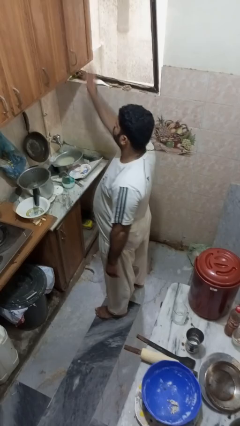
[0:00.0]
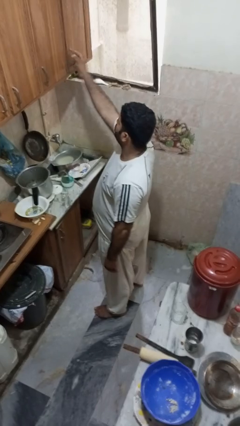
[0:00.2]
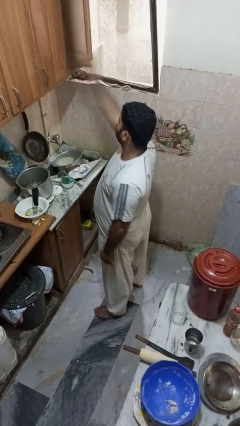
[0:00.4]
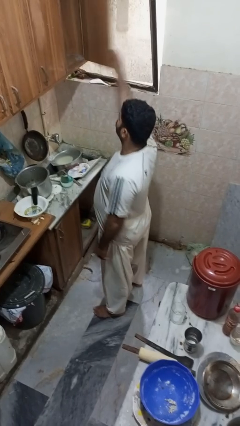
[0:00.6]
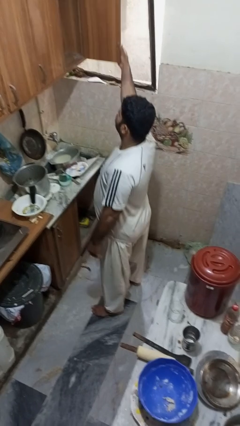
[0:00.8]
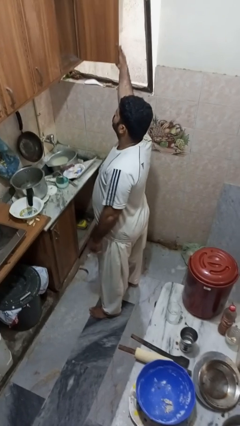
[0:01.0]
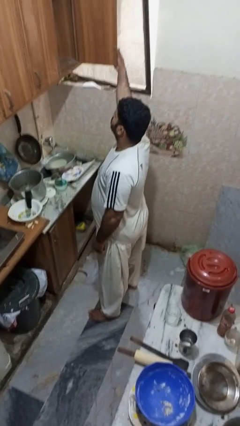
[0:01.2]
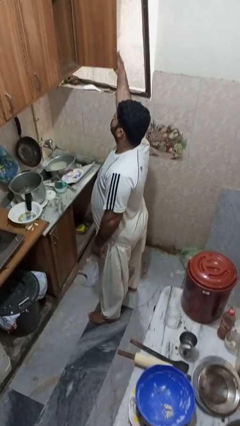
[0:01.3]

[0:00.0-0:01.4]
person opens cabinet

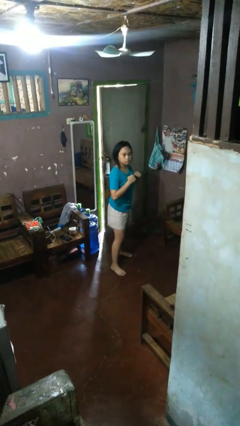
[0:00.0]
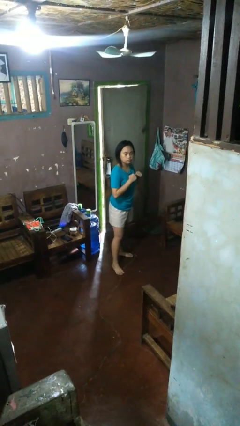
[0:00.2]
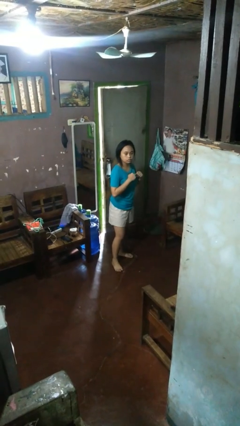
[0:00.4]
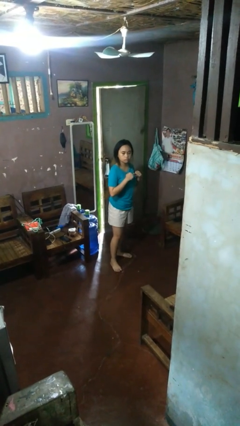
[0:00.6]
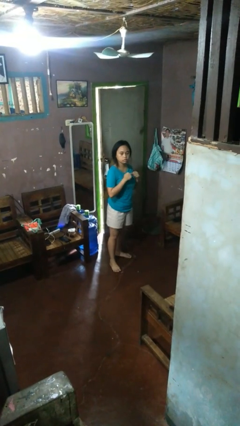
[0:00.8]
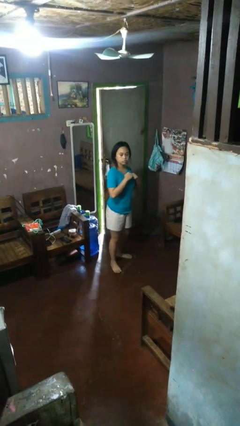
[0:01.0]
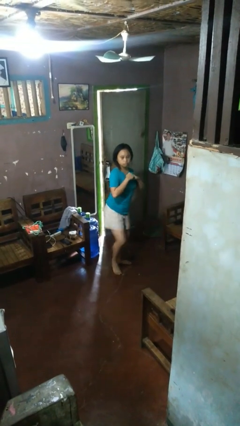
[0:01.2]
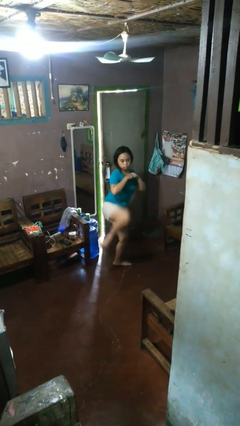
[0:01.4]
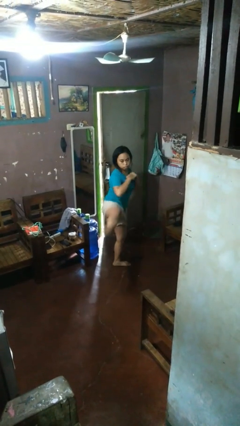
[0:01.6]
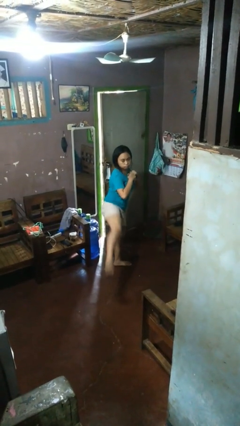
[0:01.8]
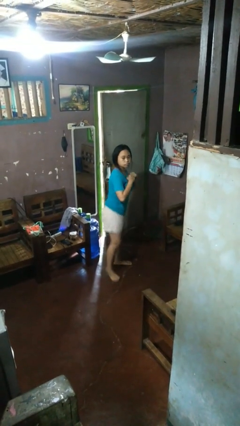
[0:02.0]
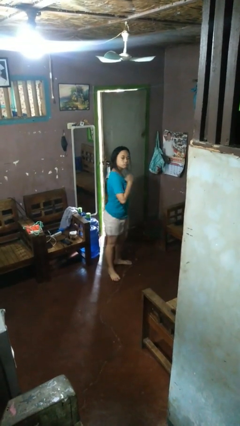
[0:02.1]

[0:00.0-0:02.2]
person karate kicks

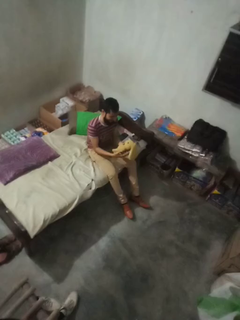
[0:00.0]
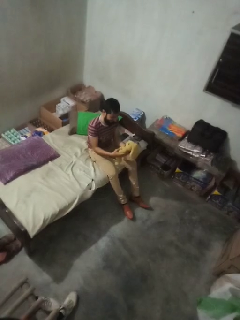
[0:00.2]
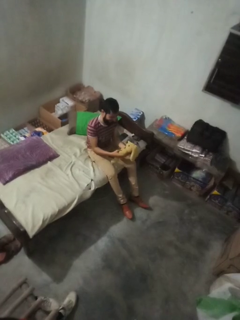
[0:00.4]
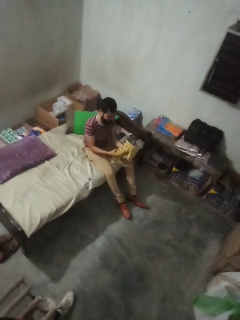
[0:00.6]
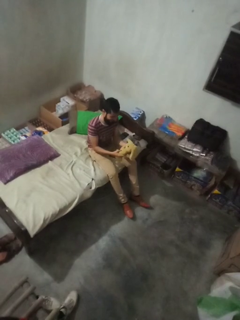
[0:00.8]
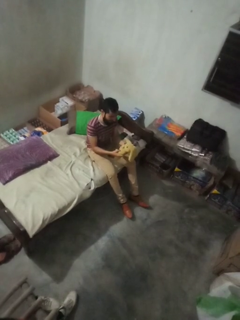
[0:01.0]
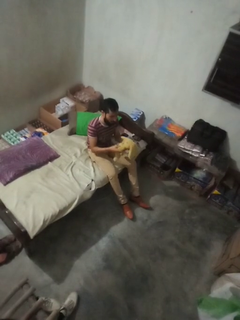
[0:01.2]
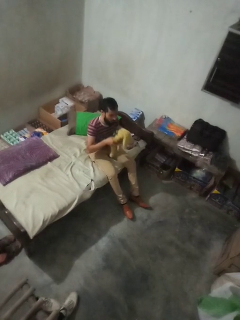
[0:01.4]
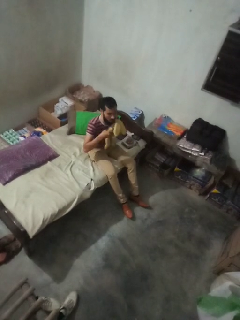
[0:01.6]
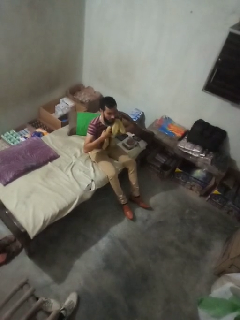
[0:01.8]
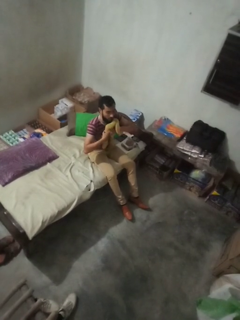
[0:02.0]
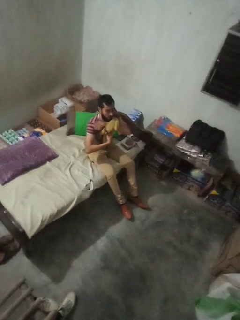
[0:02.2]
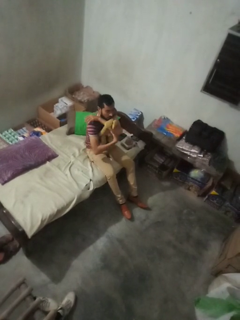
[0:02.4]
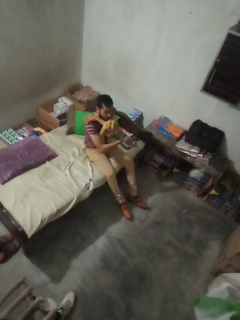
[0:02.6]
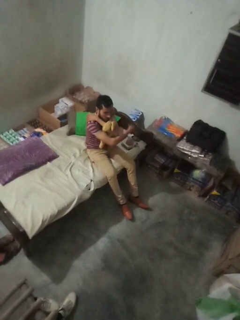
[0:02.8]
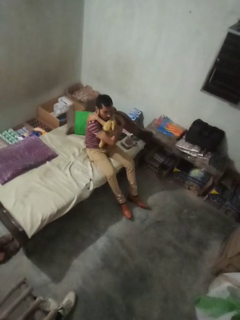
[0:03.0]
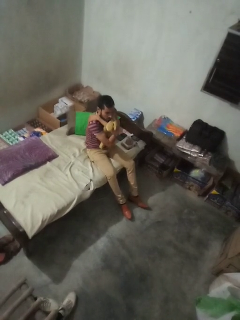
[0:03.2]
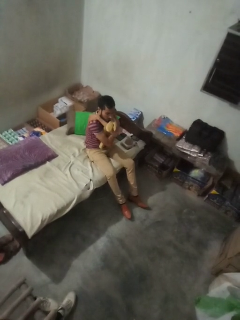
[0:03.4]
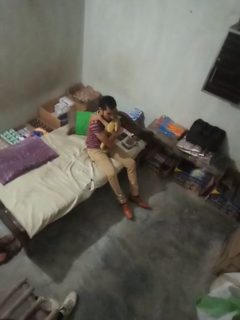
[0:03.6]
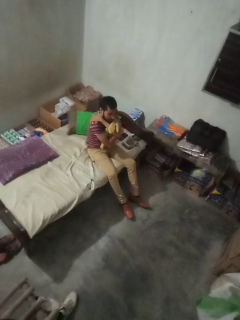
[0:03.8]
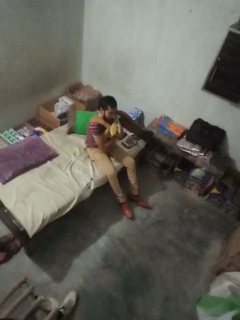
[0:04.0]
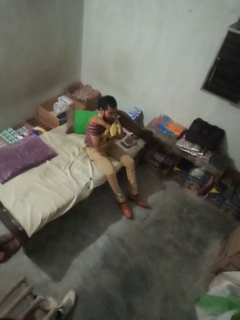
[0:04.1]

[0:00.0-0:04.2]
person hugs stuffed animal

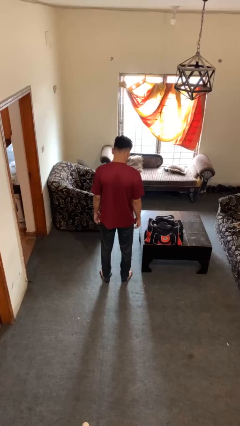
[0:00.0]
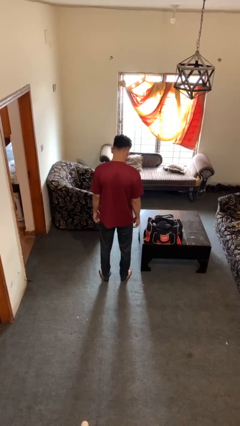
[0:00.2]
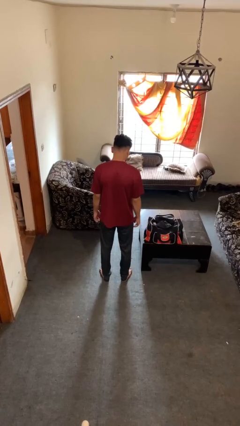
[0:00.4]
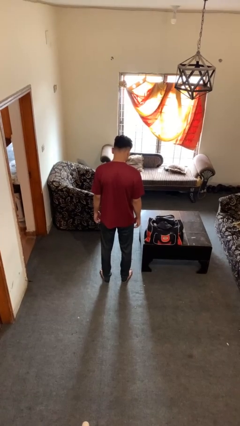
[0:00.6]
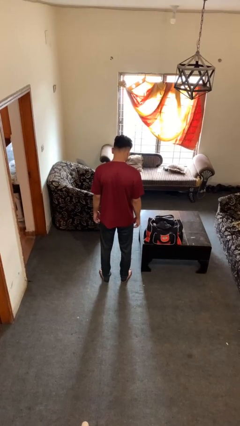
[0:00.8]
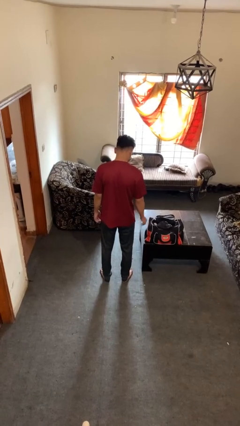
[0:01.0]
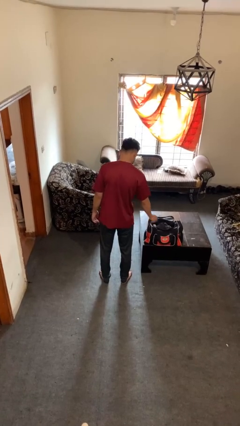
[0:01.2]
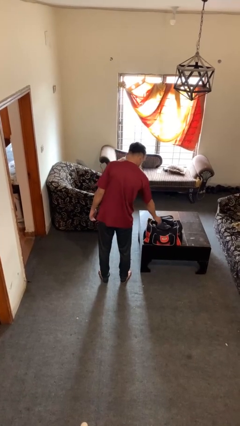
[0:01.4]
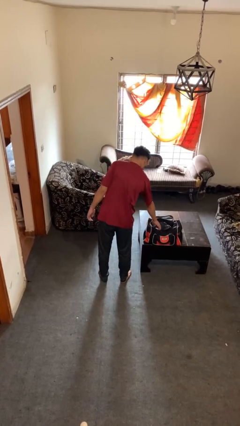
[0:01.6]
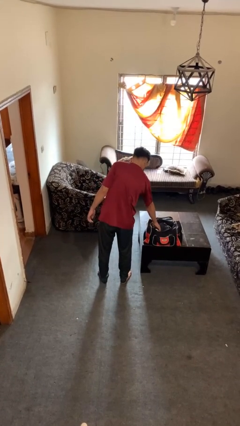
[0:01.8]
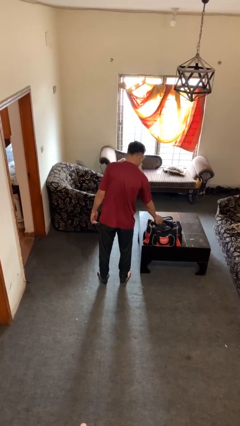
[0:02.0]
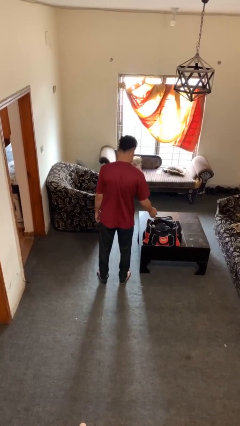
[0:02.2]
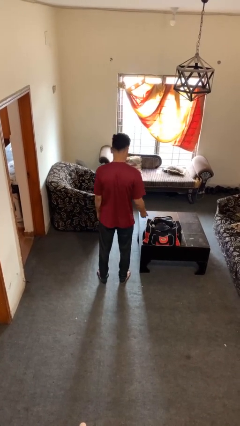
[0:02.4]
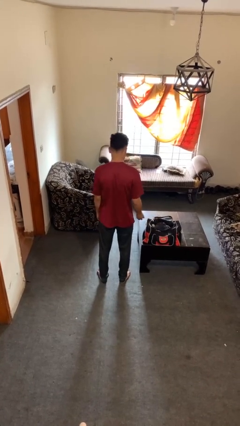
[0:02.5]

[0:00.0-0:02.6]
person takes object from bag

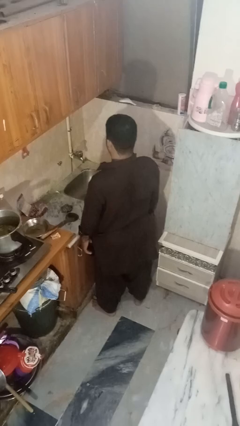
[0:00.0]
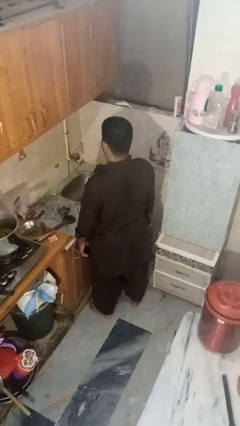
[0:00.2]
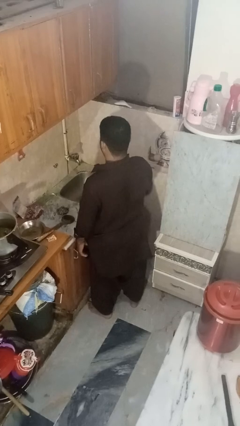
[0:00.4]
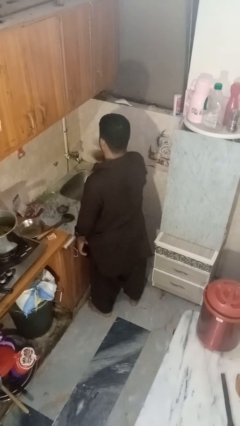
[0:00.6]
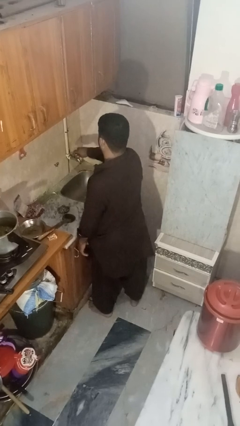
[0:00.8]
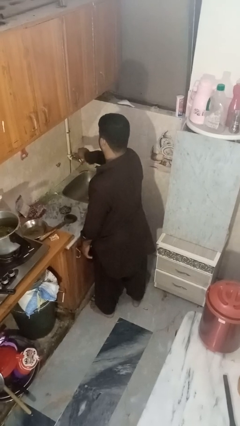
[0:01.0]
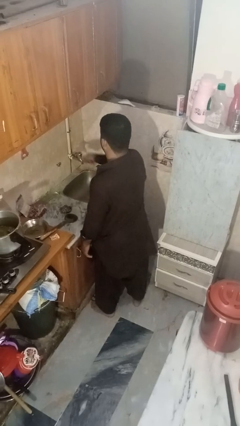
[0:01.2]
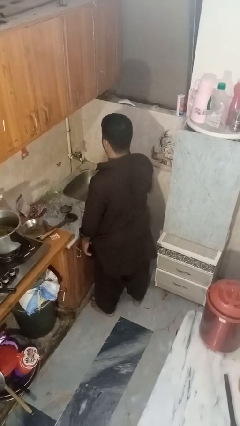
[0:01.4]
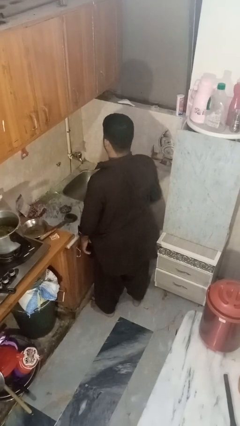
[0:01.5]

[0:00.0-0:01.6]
person turns off faucet

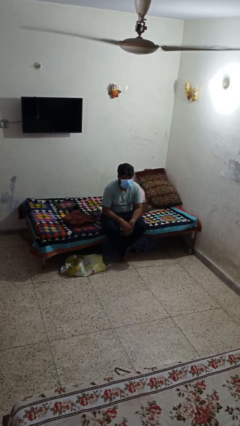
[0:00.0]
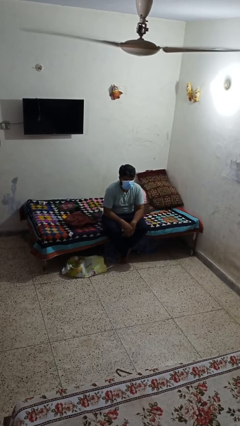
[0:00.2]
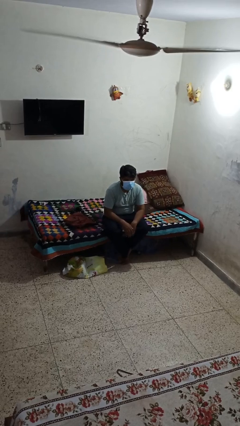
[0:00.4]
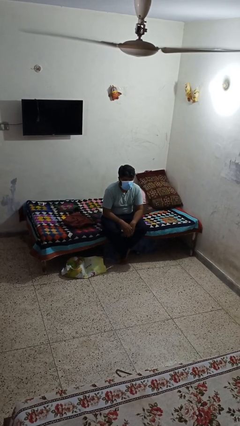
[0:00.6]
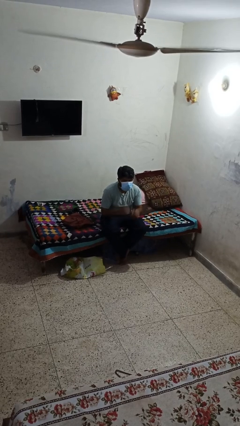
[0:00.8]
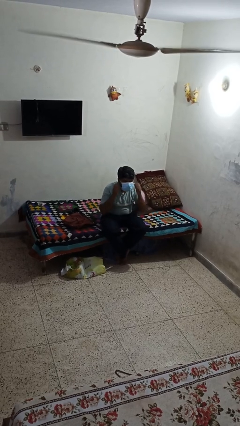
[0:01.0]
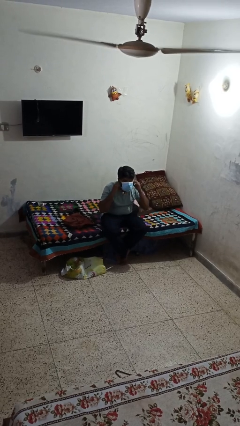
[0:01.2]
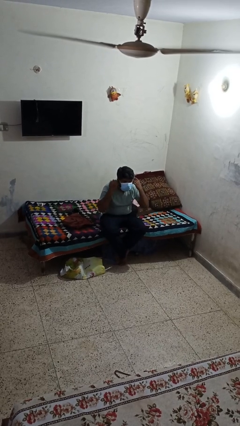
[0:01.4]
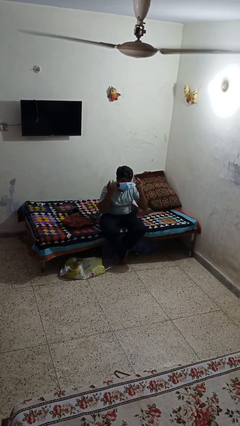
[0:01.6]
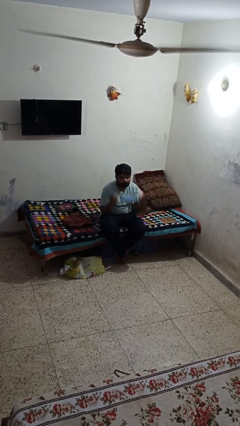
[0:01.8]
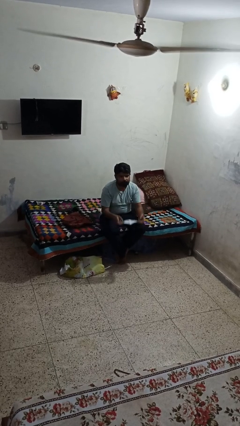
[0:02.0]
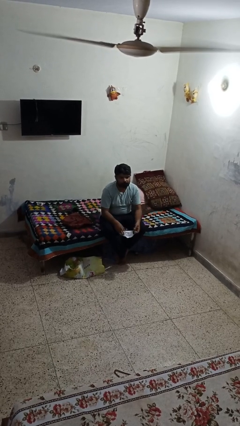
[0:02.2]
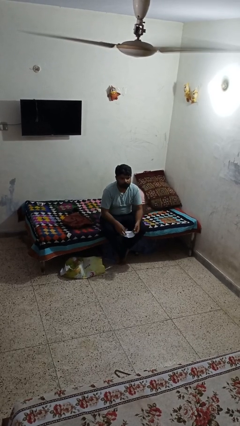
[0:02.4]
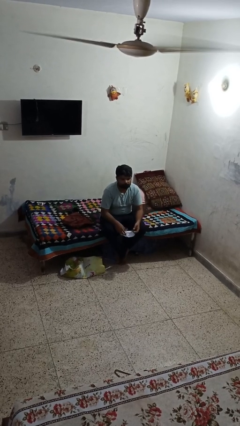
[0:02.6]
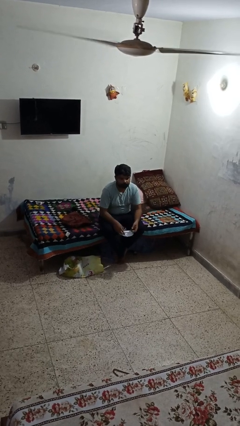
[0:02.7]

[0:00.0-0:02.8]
person takes off facemask

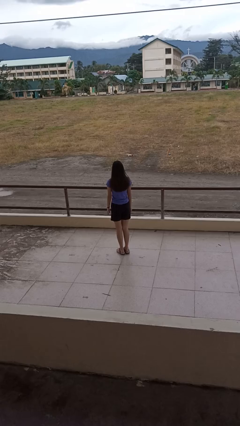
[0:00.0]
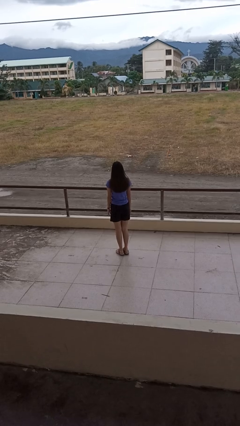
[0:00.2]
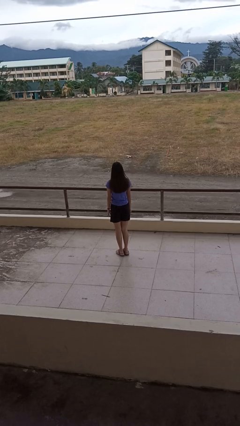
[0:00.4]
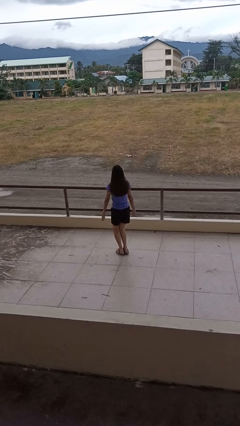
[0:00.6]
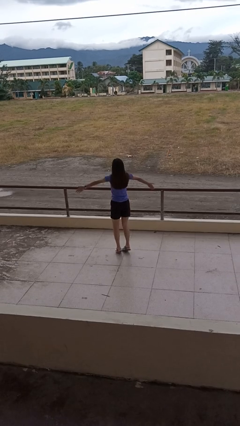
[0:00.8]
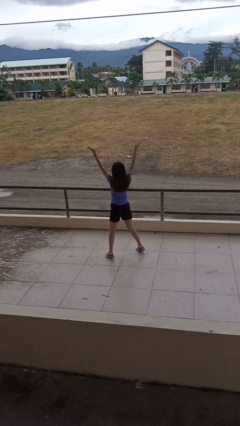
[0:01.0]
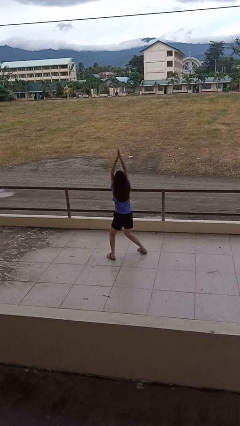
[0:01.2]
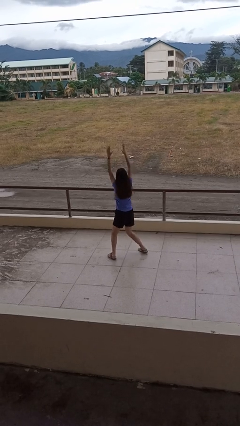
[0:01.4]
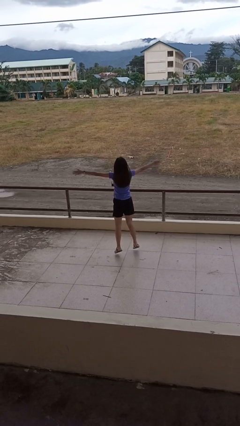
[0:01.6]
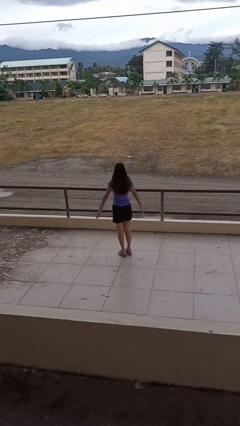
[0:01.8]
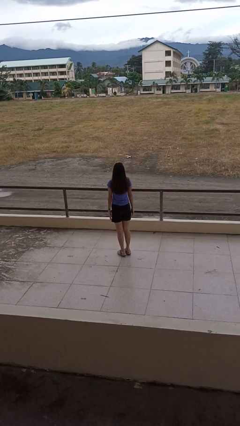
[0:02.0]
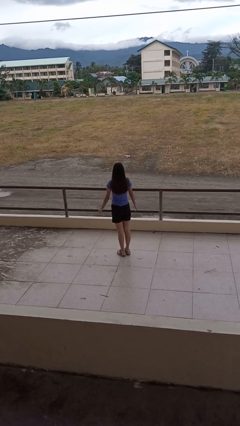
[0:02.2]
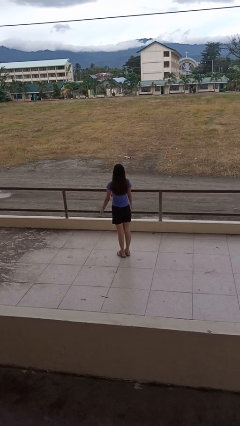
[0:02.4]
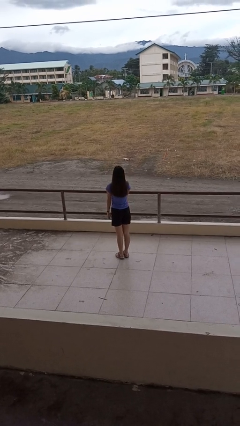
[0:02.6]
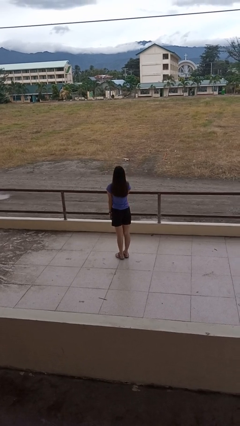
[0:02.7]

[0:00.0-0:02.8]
person exercises with jumping jacks

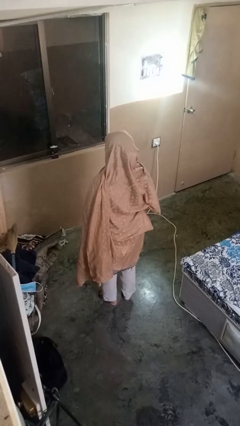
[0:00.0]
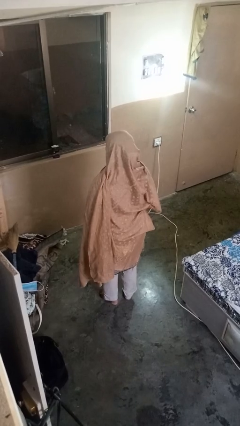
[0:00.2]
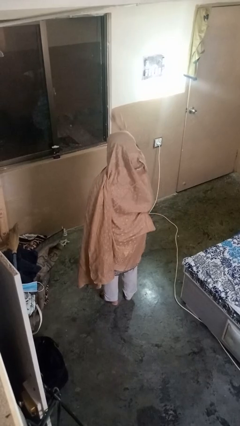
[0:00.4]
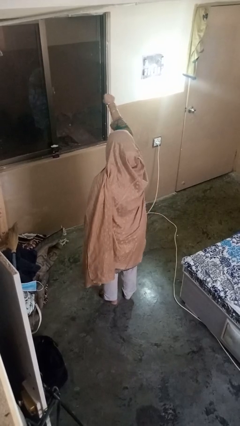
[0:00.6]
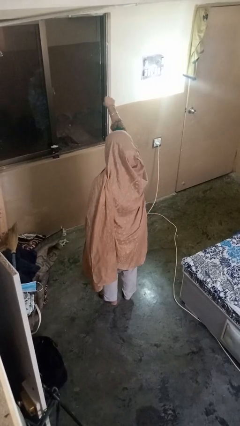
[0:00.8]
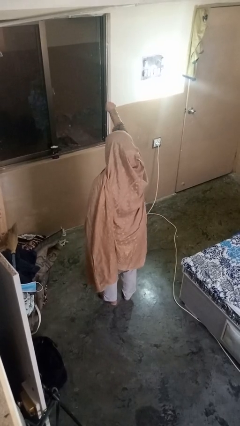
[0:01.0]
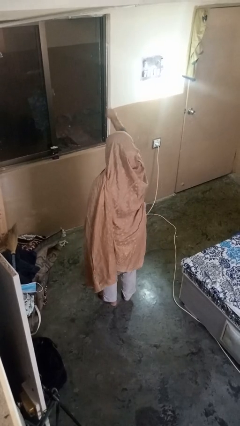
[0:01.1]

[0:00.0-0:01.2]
person punches
